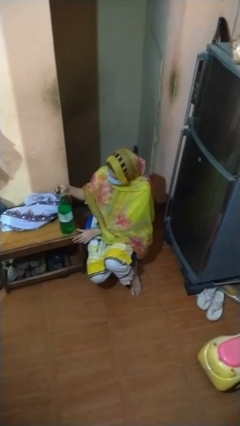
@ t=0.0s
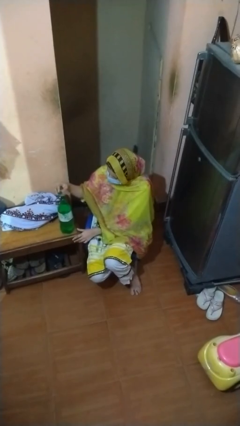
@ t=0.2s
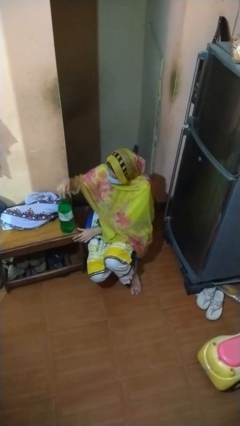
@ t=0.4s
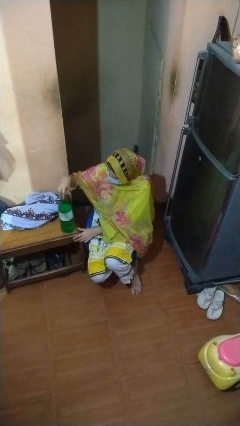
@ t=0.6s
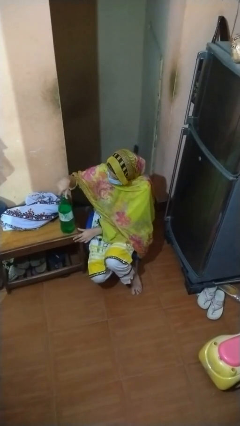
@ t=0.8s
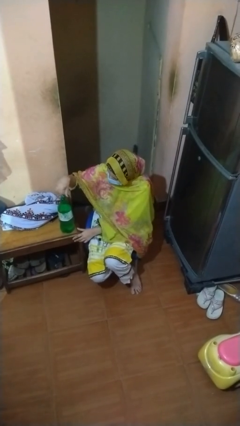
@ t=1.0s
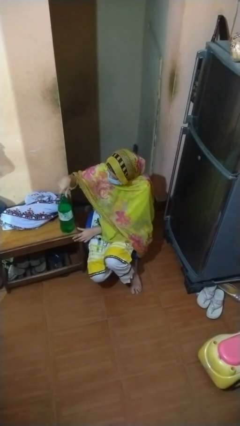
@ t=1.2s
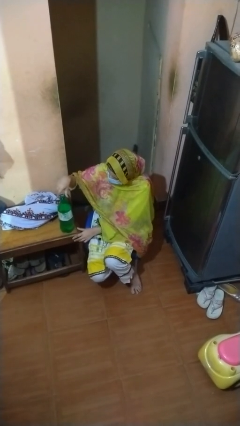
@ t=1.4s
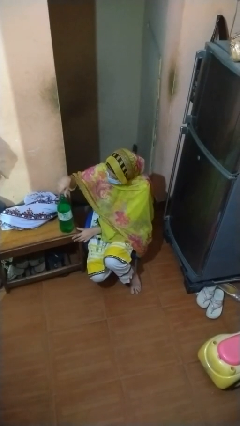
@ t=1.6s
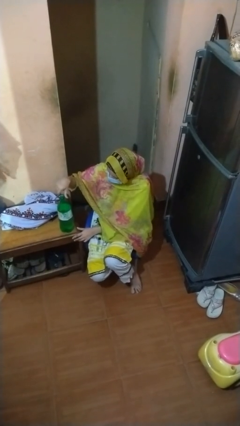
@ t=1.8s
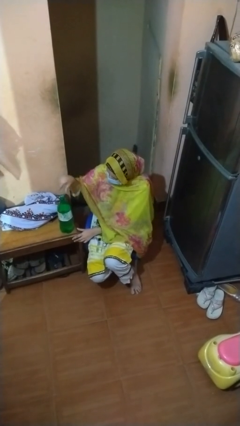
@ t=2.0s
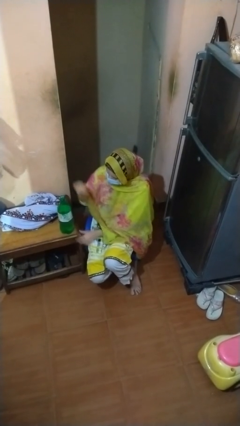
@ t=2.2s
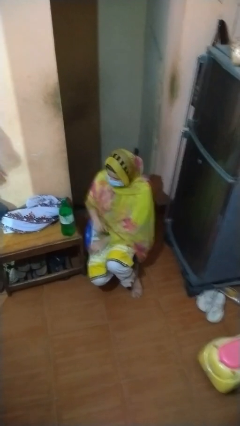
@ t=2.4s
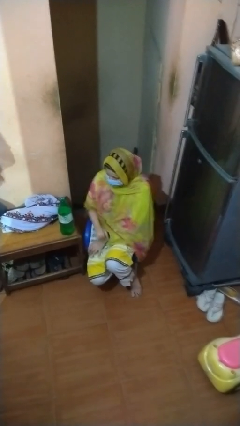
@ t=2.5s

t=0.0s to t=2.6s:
person screws lid to bottle

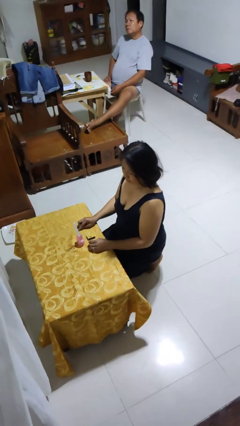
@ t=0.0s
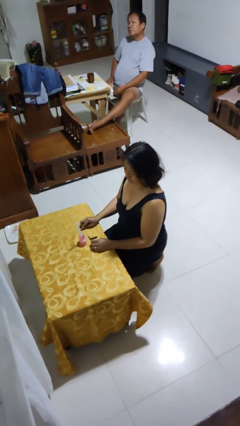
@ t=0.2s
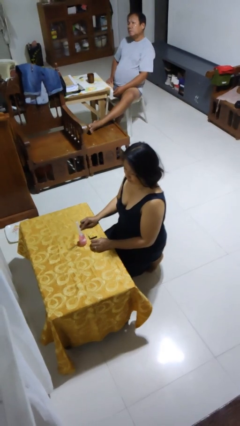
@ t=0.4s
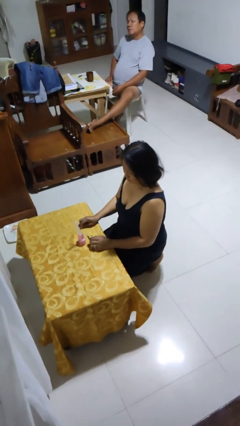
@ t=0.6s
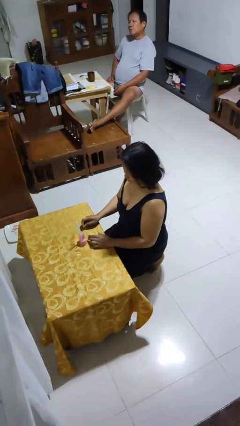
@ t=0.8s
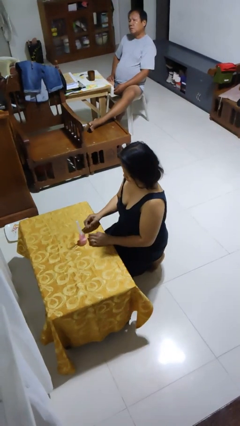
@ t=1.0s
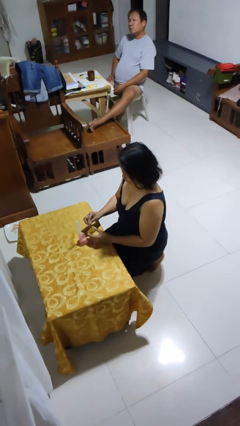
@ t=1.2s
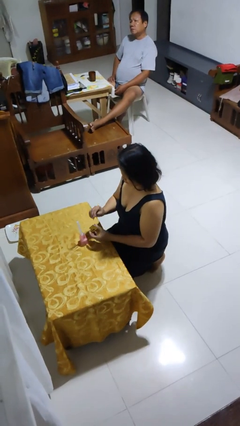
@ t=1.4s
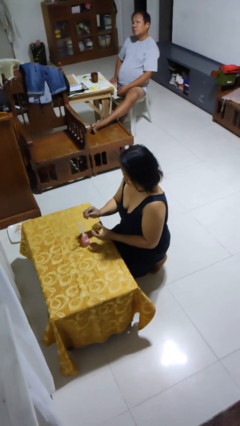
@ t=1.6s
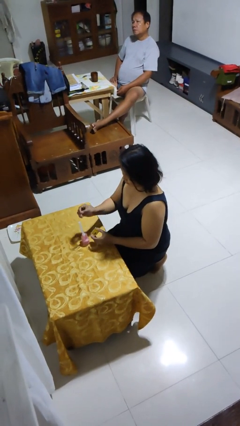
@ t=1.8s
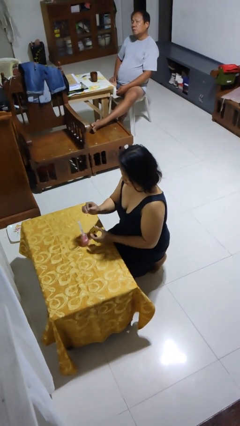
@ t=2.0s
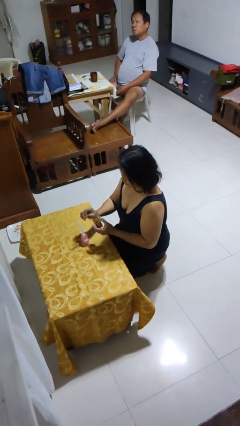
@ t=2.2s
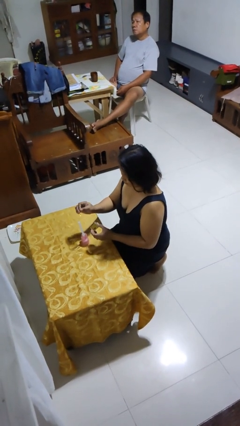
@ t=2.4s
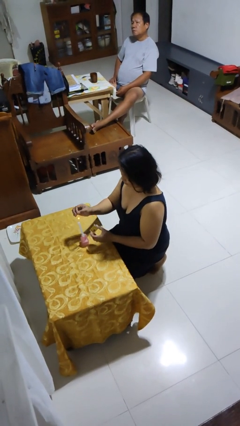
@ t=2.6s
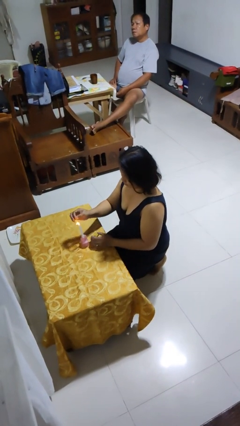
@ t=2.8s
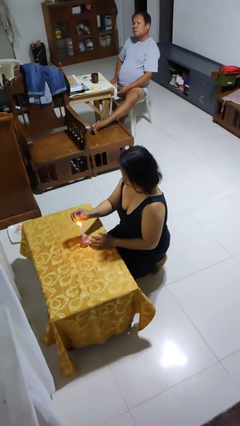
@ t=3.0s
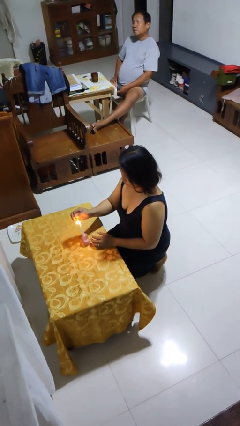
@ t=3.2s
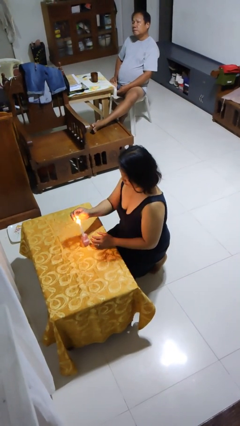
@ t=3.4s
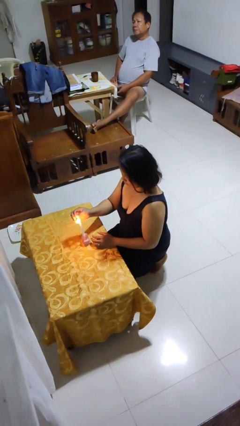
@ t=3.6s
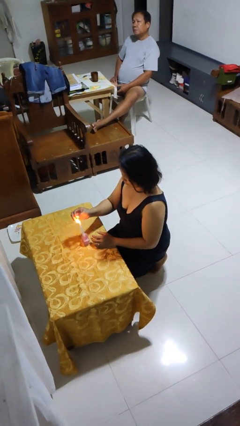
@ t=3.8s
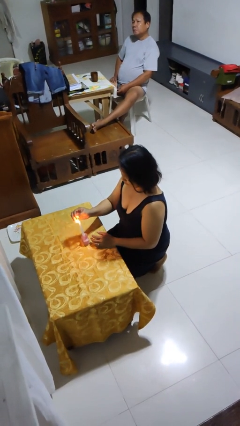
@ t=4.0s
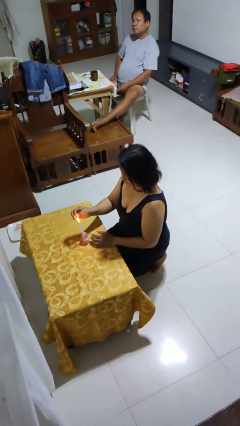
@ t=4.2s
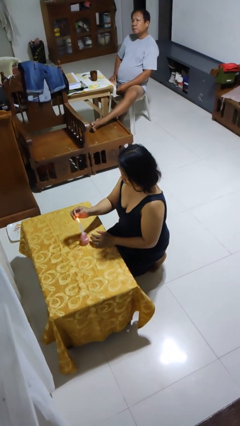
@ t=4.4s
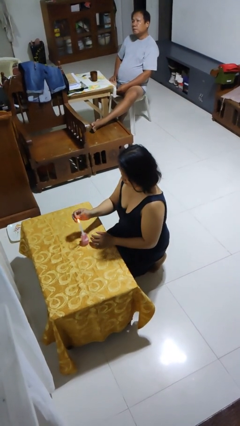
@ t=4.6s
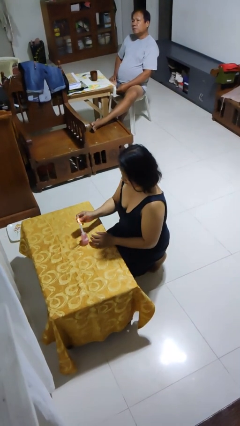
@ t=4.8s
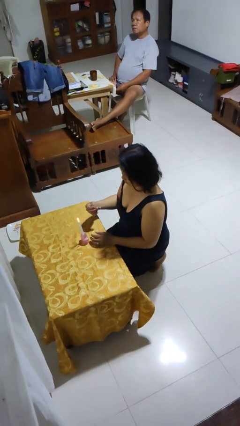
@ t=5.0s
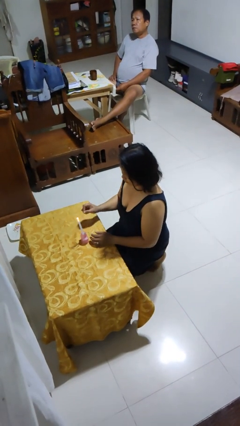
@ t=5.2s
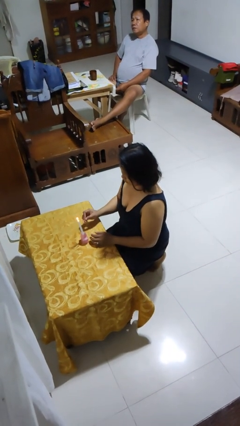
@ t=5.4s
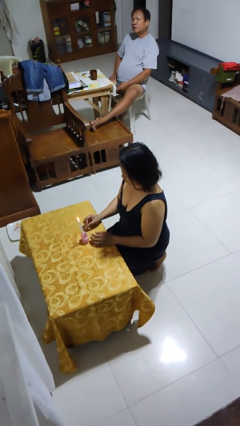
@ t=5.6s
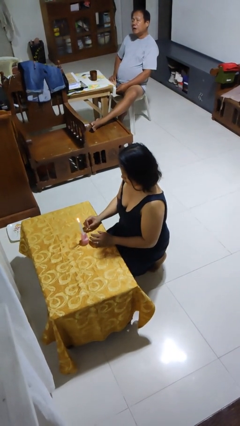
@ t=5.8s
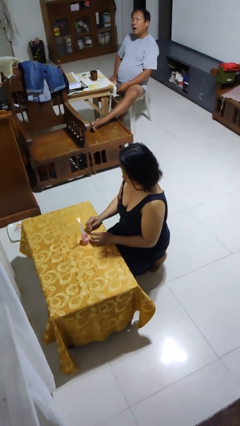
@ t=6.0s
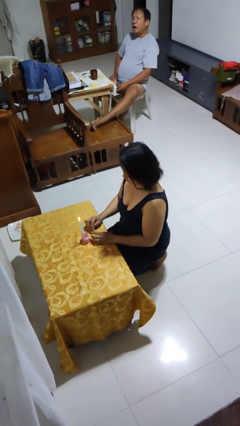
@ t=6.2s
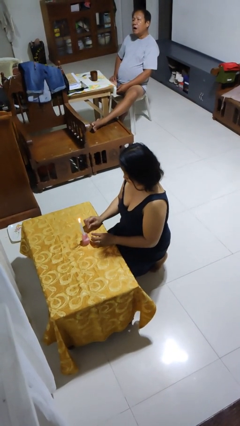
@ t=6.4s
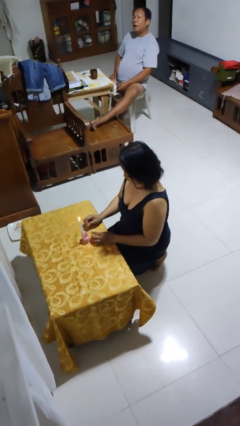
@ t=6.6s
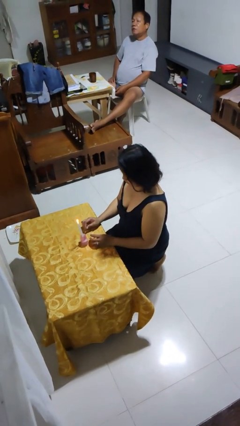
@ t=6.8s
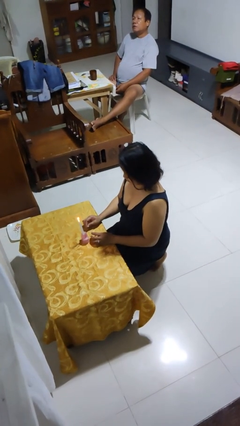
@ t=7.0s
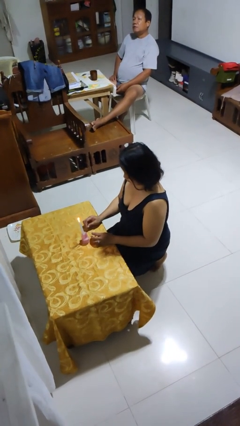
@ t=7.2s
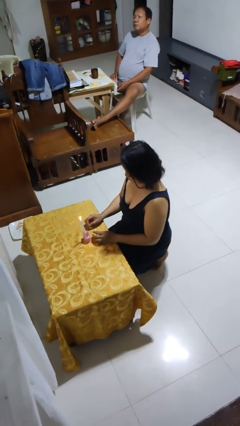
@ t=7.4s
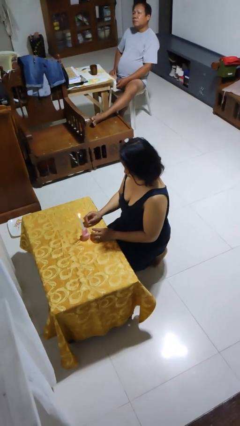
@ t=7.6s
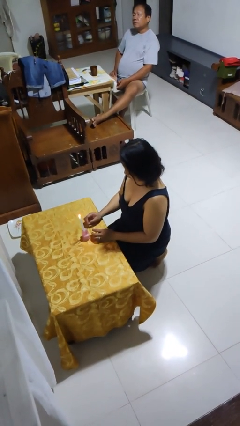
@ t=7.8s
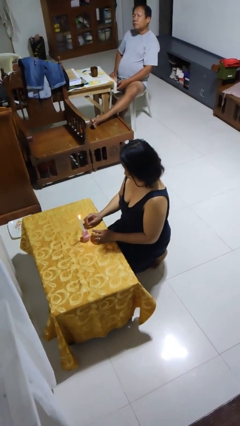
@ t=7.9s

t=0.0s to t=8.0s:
person lights candle

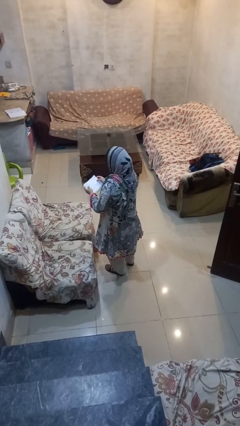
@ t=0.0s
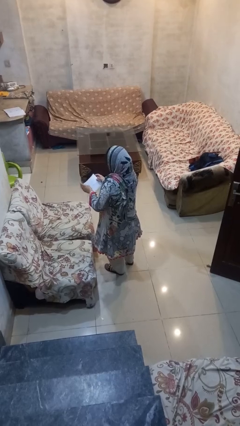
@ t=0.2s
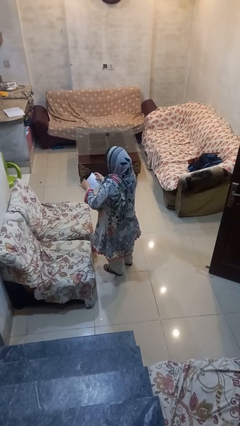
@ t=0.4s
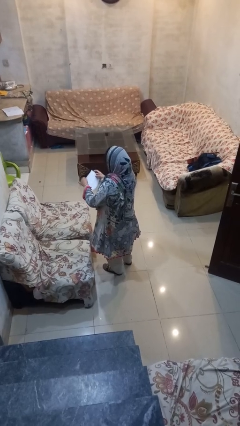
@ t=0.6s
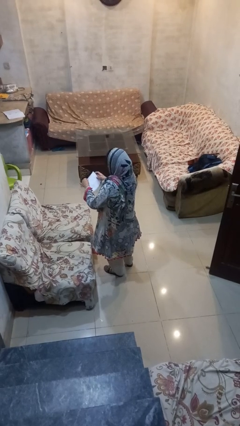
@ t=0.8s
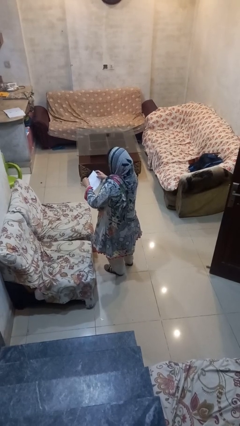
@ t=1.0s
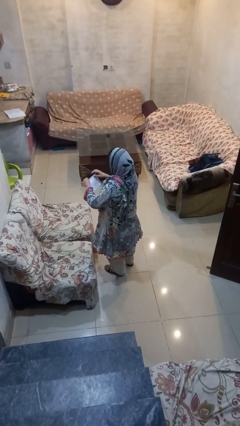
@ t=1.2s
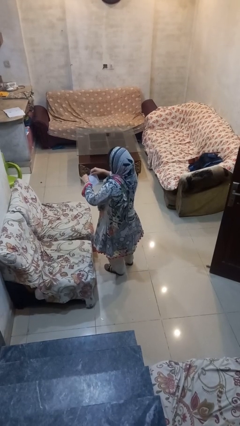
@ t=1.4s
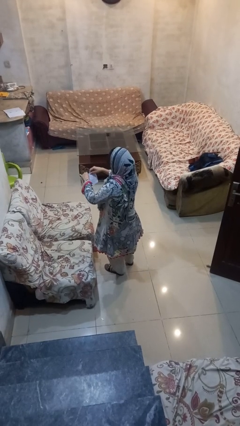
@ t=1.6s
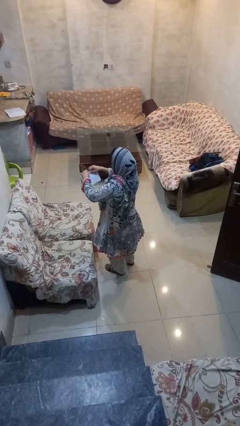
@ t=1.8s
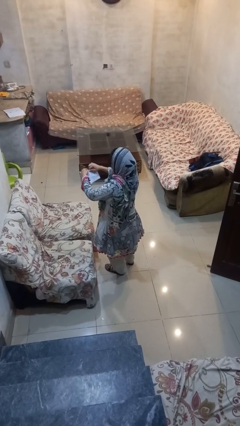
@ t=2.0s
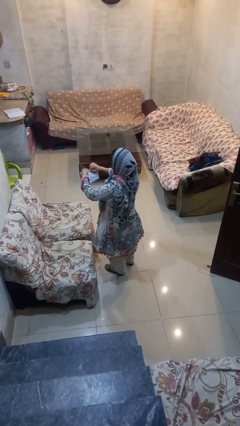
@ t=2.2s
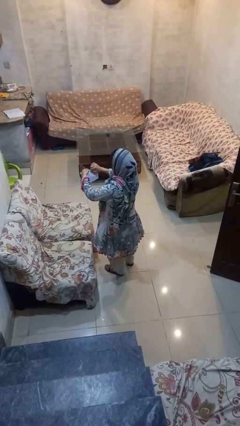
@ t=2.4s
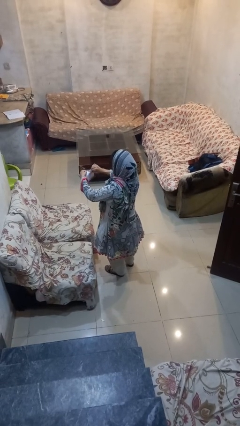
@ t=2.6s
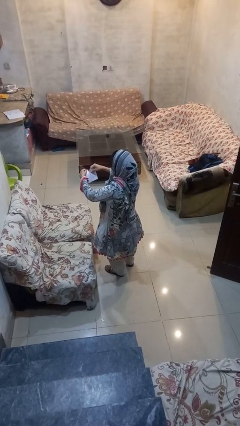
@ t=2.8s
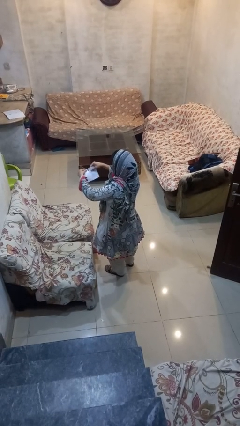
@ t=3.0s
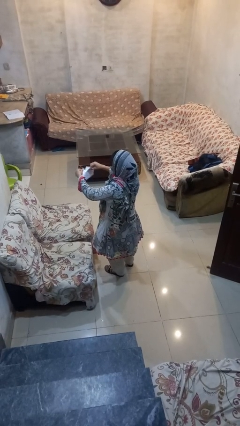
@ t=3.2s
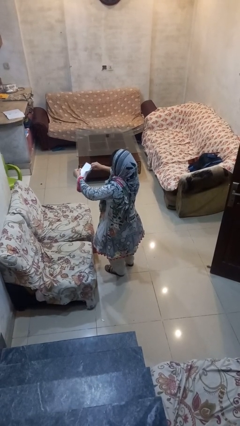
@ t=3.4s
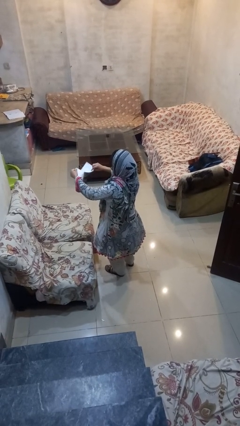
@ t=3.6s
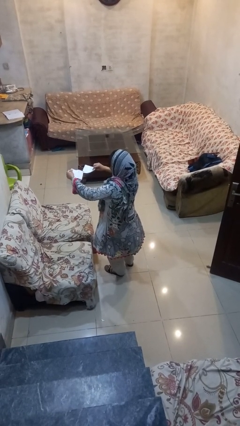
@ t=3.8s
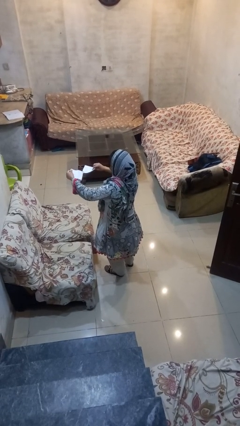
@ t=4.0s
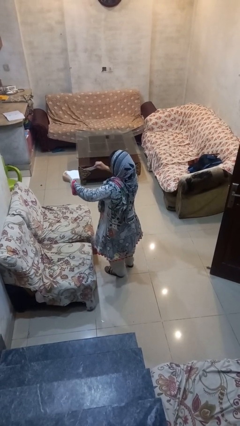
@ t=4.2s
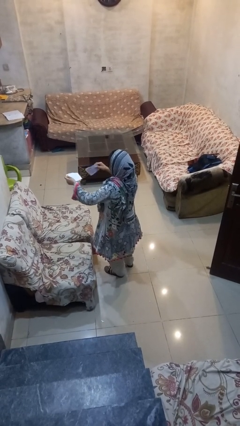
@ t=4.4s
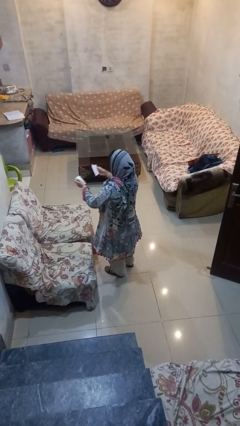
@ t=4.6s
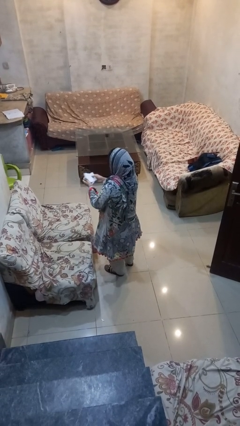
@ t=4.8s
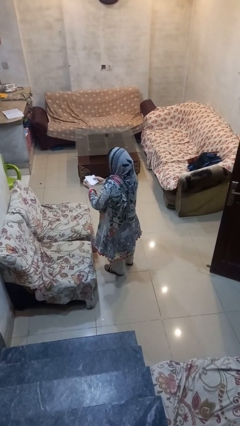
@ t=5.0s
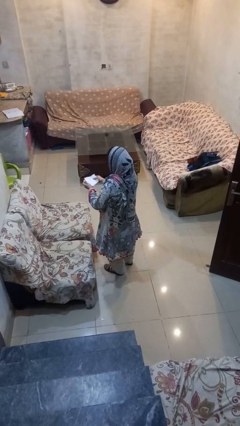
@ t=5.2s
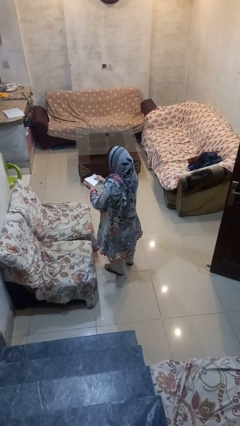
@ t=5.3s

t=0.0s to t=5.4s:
person tears paper

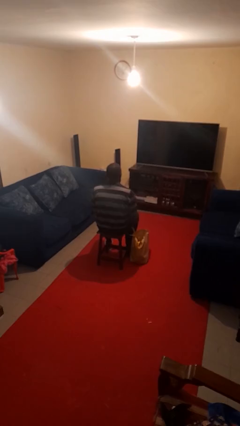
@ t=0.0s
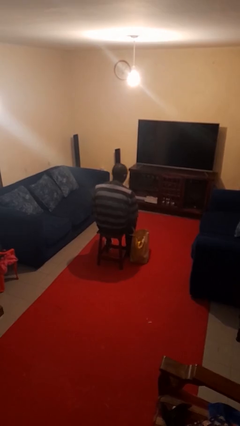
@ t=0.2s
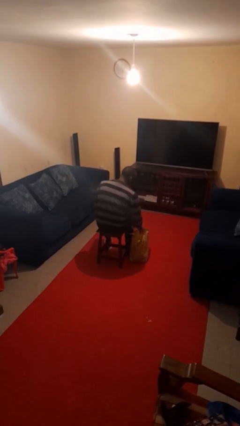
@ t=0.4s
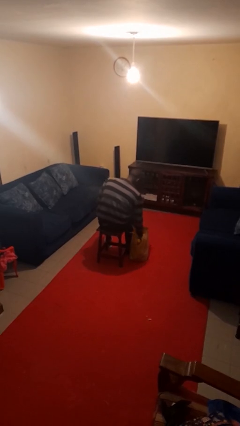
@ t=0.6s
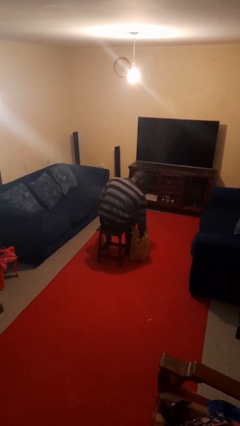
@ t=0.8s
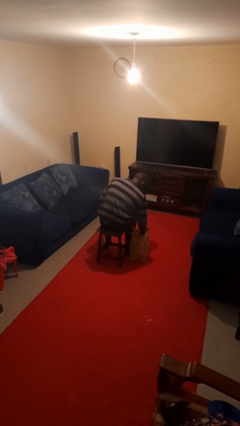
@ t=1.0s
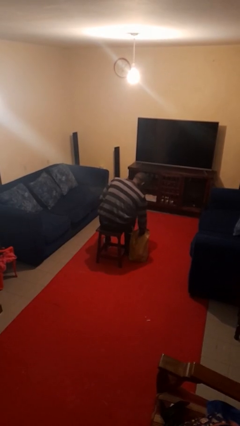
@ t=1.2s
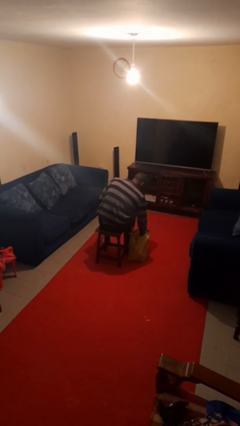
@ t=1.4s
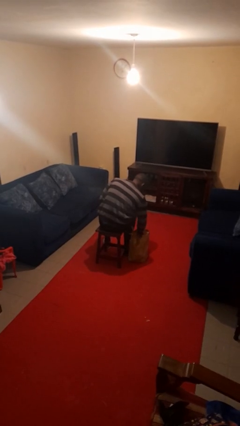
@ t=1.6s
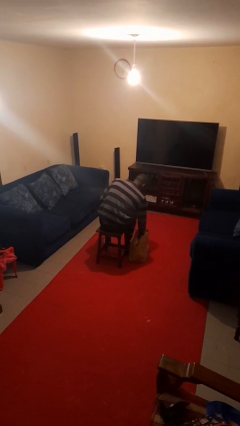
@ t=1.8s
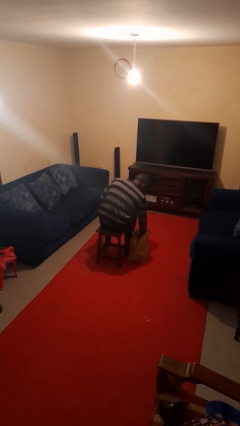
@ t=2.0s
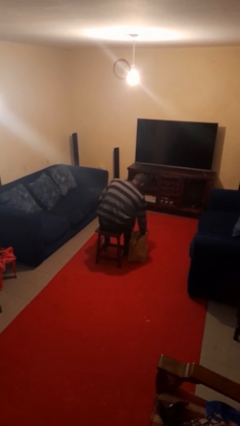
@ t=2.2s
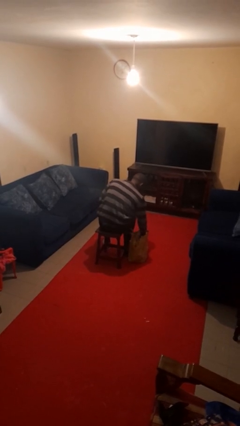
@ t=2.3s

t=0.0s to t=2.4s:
person searches in bag
